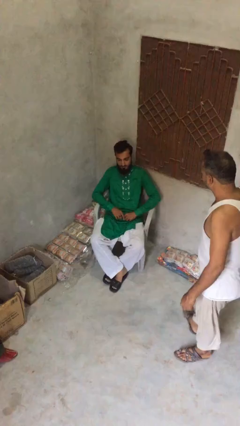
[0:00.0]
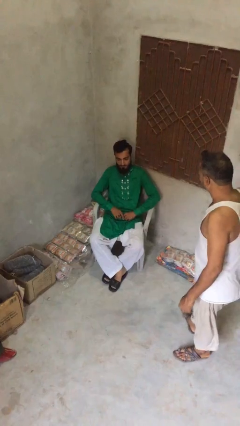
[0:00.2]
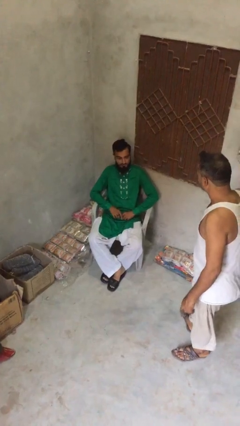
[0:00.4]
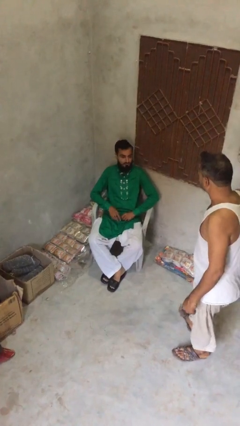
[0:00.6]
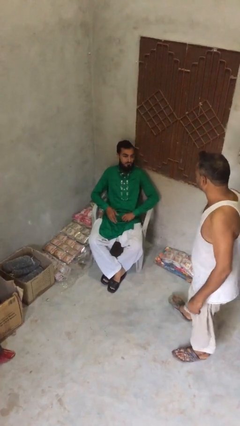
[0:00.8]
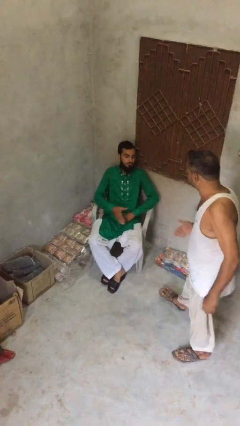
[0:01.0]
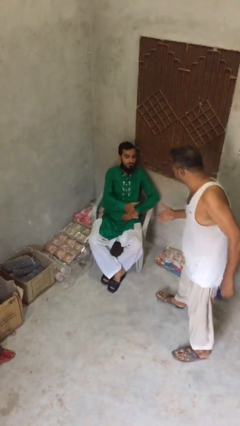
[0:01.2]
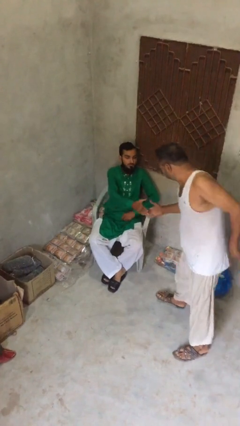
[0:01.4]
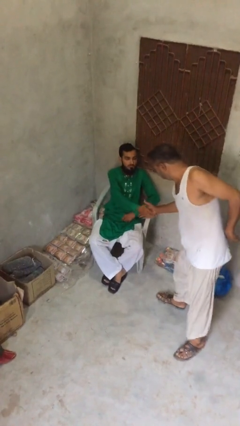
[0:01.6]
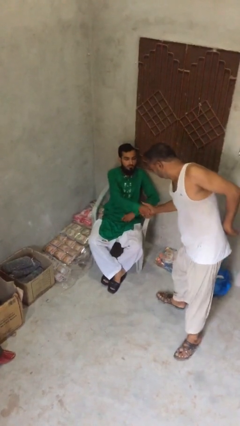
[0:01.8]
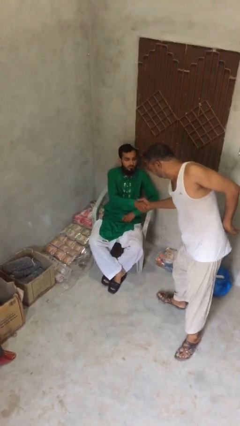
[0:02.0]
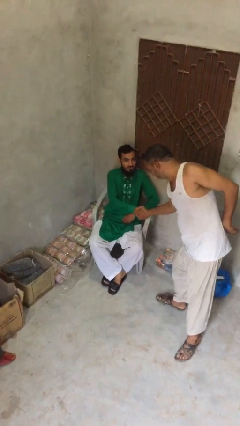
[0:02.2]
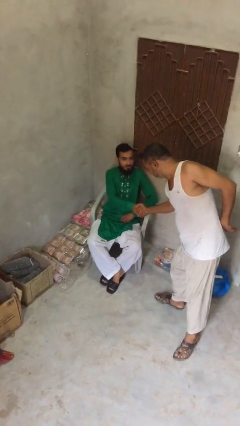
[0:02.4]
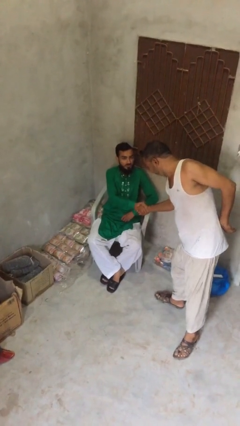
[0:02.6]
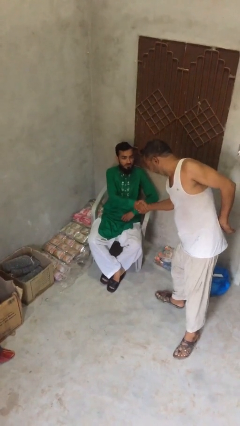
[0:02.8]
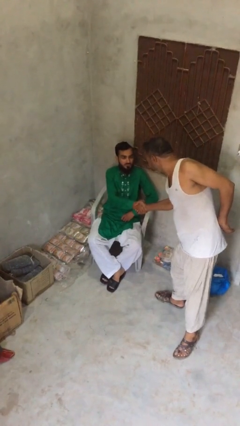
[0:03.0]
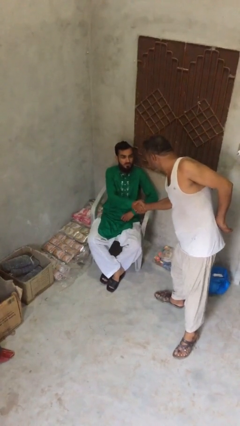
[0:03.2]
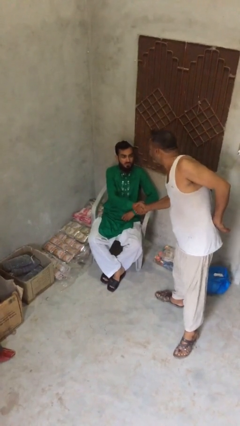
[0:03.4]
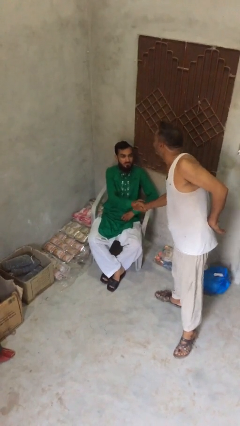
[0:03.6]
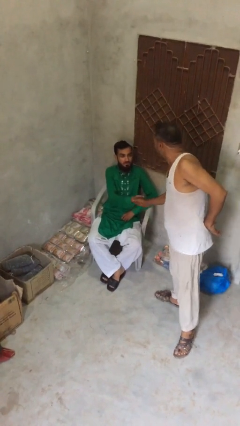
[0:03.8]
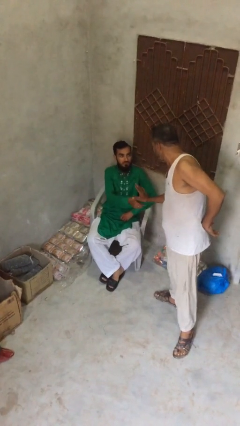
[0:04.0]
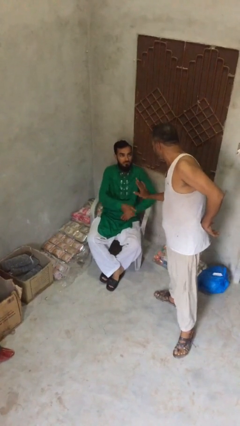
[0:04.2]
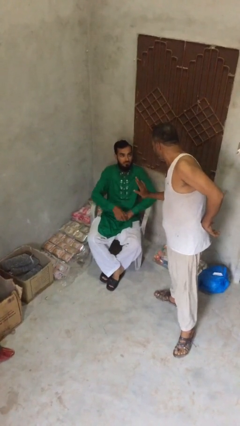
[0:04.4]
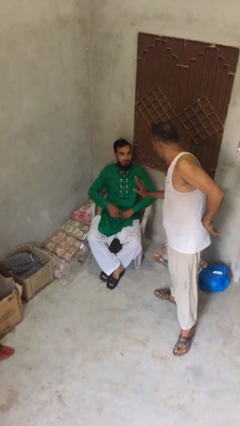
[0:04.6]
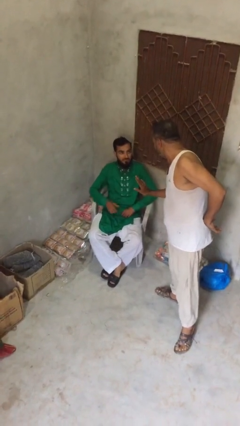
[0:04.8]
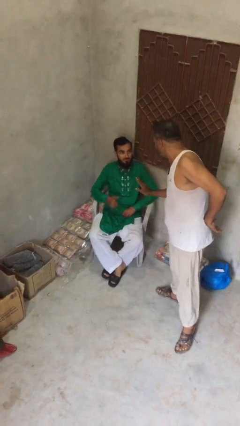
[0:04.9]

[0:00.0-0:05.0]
person shakes hand

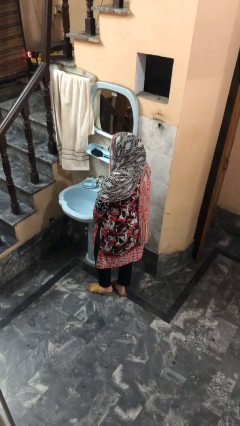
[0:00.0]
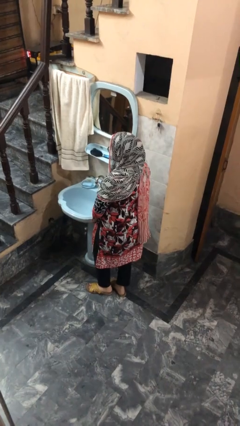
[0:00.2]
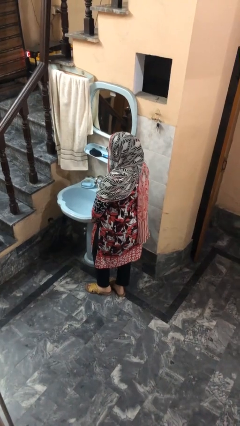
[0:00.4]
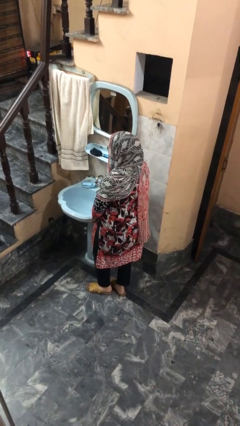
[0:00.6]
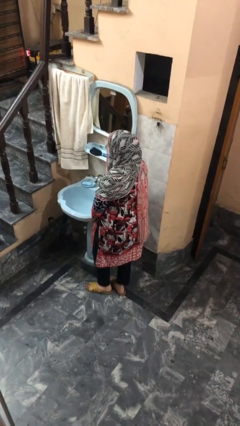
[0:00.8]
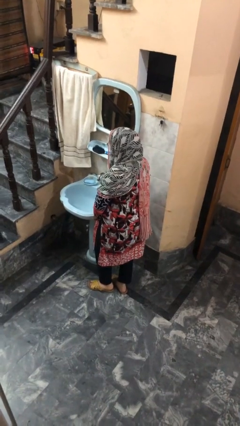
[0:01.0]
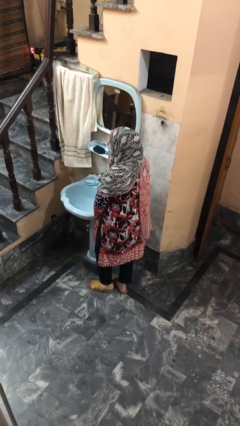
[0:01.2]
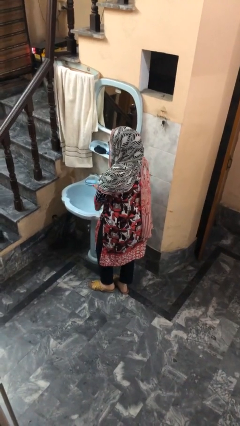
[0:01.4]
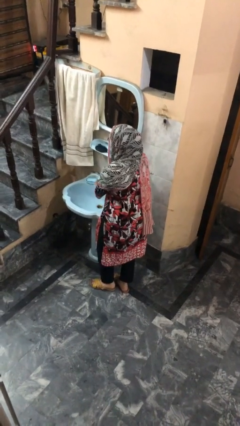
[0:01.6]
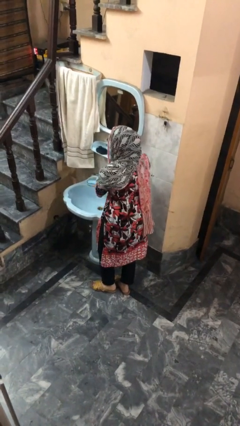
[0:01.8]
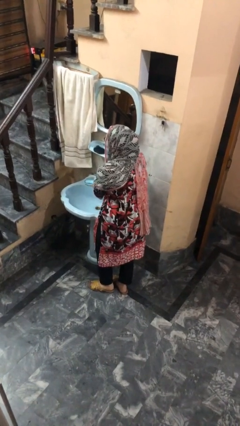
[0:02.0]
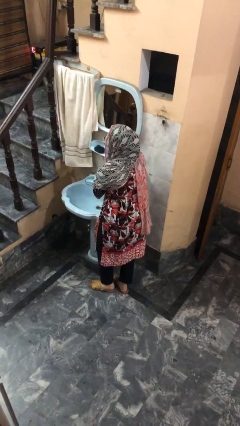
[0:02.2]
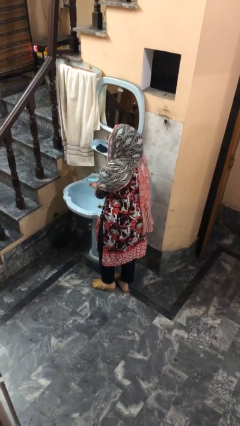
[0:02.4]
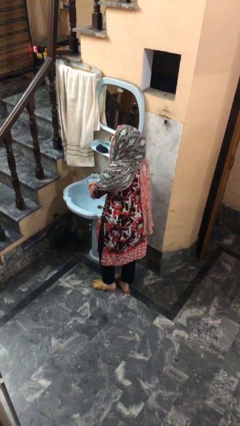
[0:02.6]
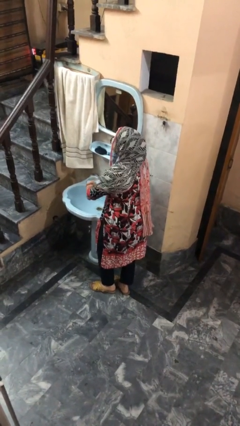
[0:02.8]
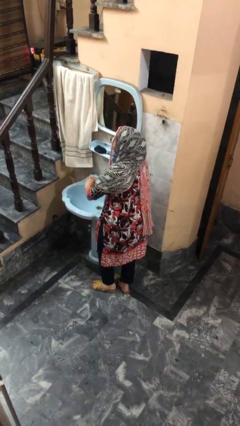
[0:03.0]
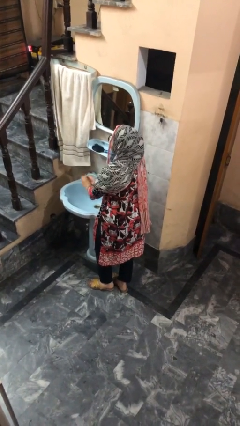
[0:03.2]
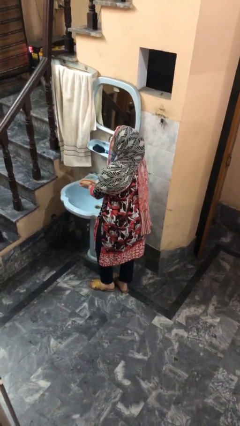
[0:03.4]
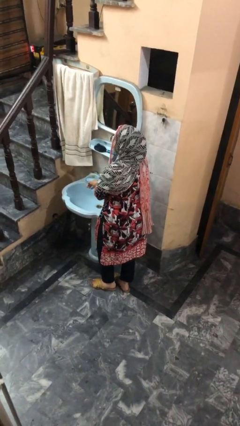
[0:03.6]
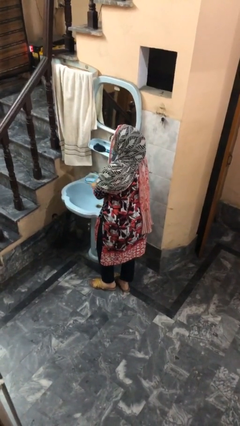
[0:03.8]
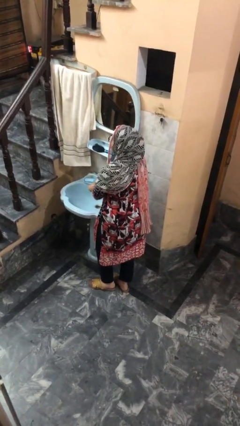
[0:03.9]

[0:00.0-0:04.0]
person washes face

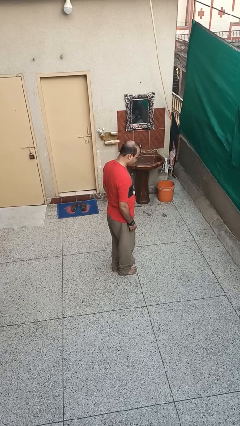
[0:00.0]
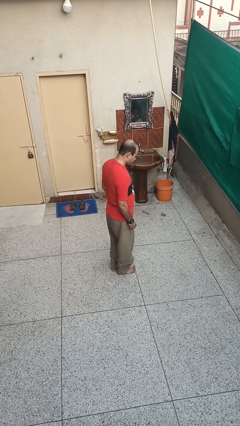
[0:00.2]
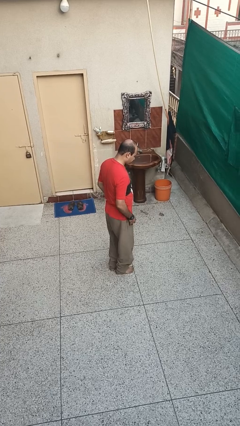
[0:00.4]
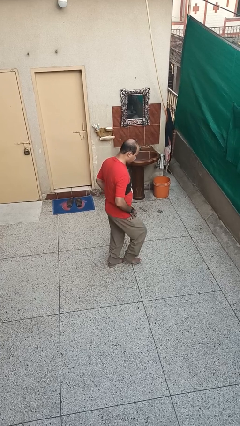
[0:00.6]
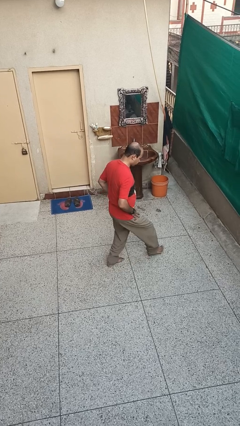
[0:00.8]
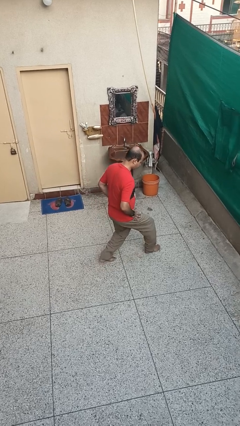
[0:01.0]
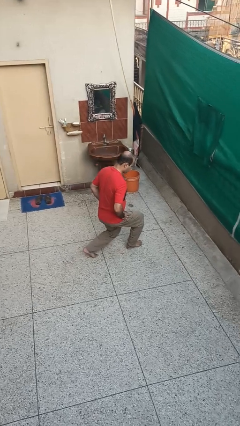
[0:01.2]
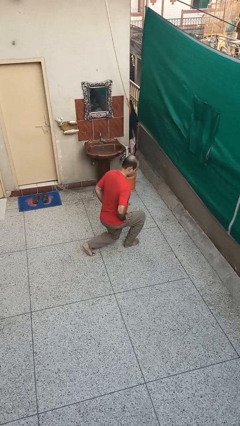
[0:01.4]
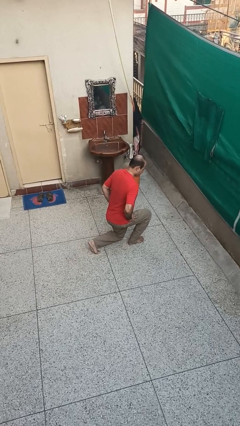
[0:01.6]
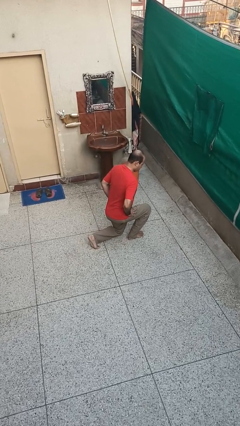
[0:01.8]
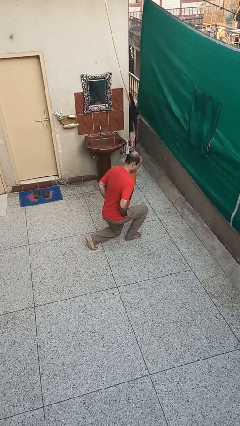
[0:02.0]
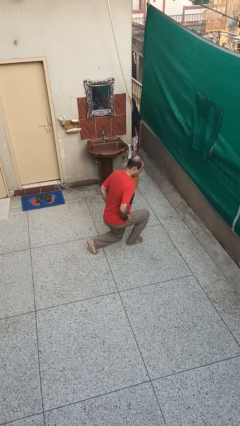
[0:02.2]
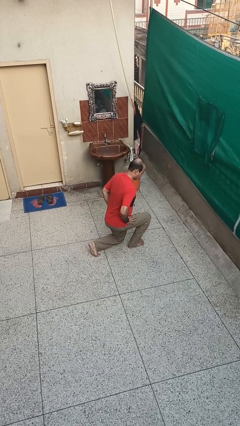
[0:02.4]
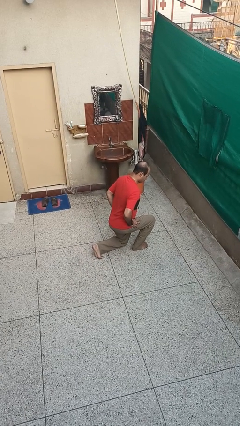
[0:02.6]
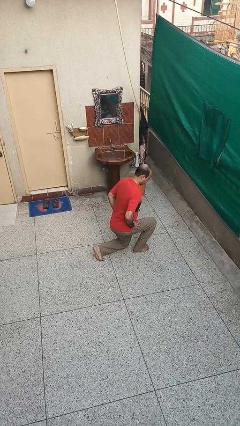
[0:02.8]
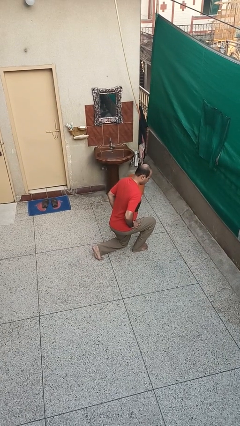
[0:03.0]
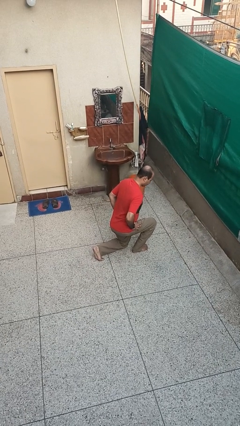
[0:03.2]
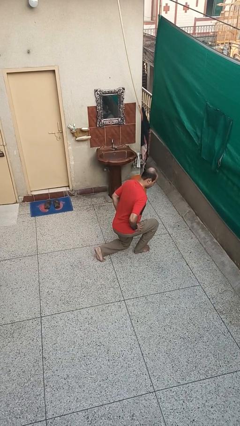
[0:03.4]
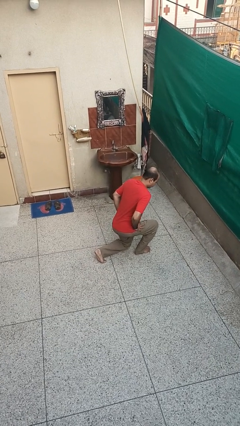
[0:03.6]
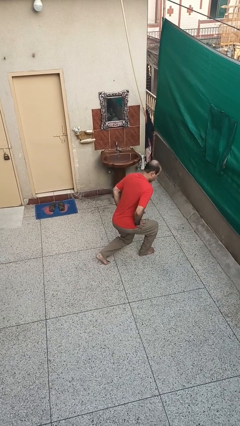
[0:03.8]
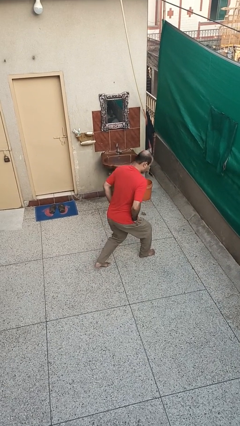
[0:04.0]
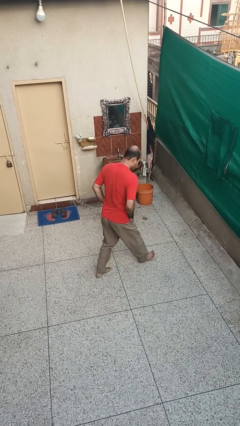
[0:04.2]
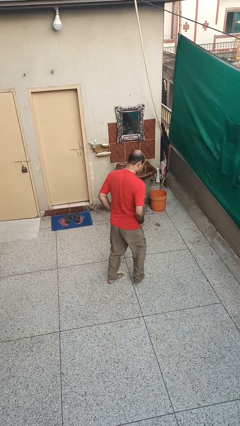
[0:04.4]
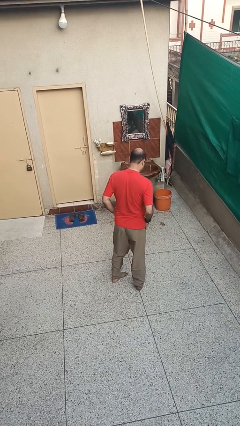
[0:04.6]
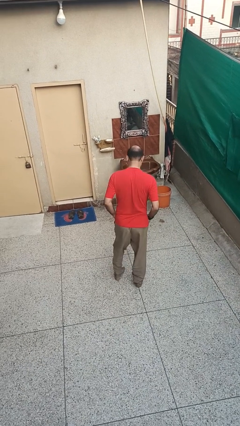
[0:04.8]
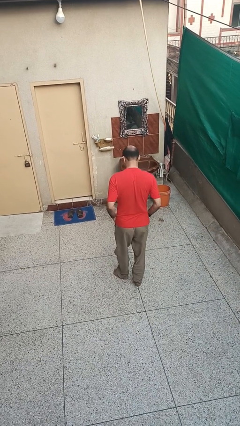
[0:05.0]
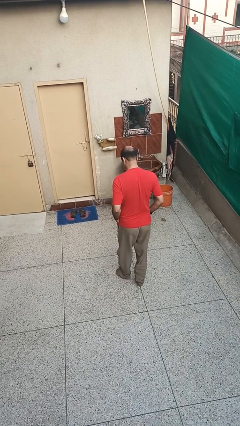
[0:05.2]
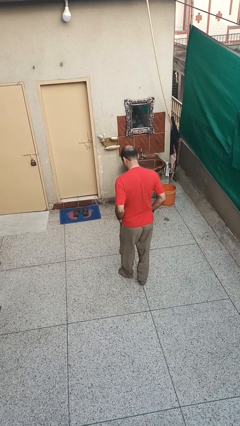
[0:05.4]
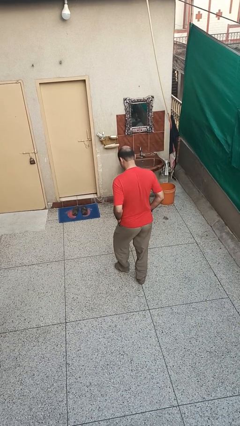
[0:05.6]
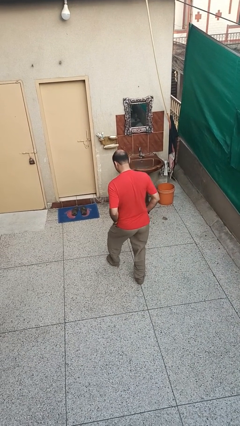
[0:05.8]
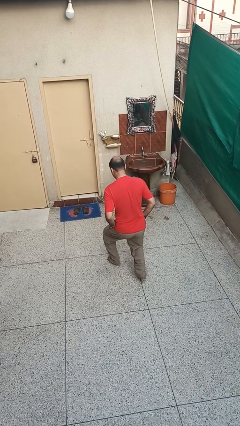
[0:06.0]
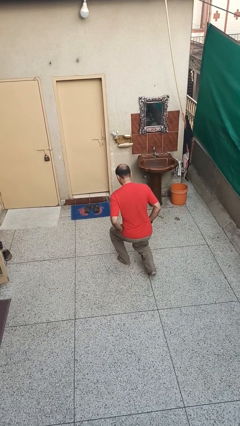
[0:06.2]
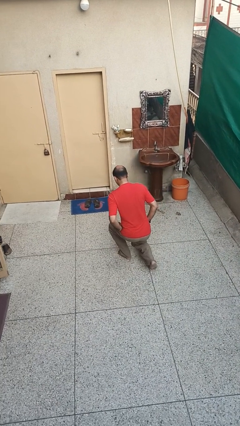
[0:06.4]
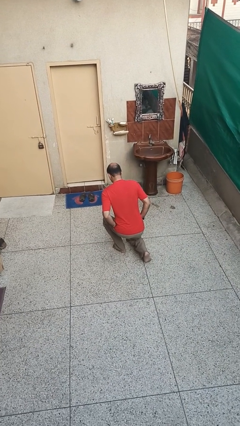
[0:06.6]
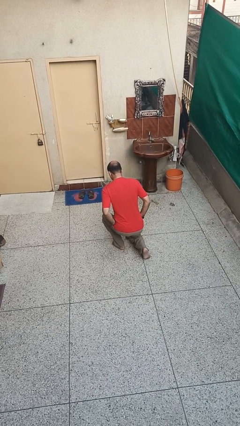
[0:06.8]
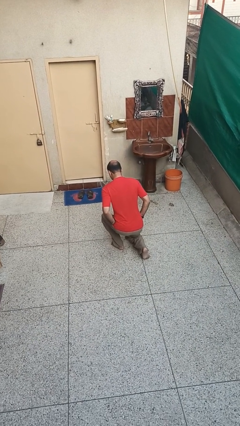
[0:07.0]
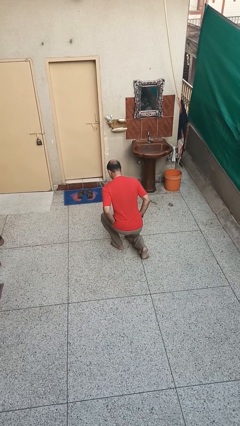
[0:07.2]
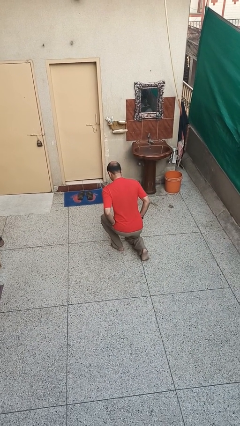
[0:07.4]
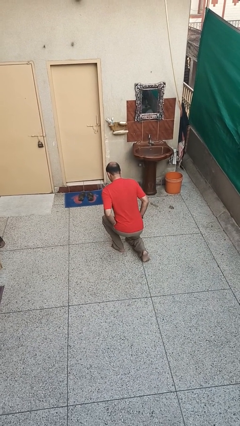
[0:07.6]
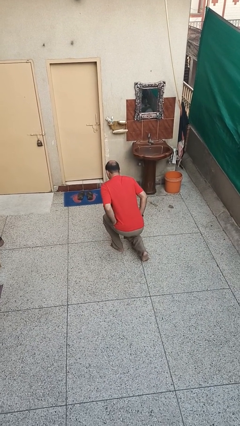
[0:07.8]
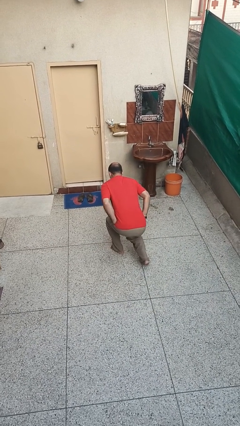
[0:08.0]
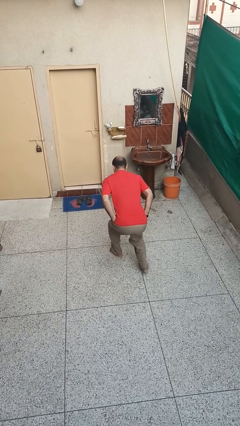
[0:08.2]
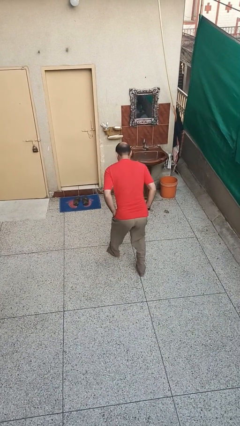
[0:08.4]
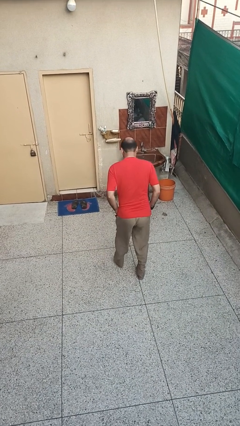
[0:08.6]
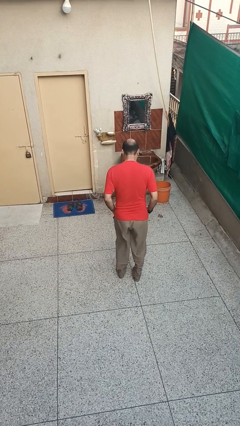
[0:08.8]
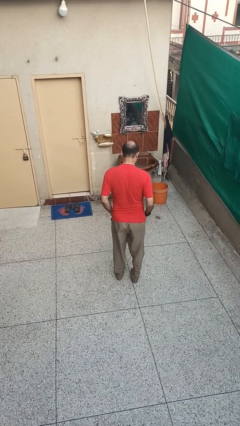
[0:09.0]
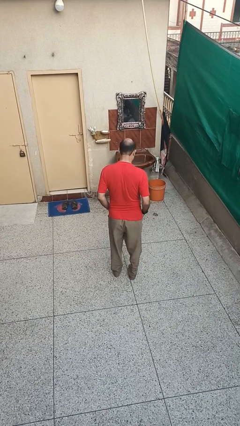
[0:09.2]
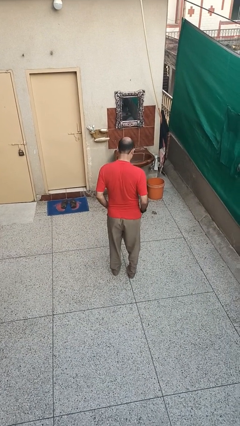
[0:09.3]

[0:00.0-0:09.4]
person exercises with lunges
